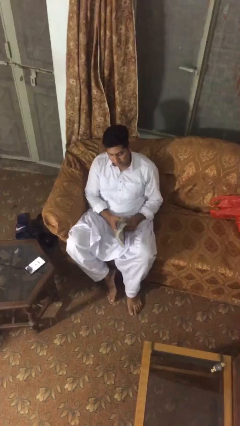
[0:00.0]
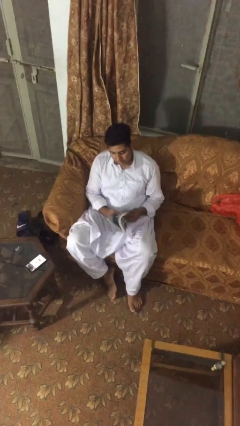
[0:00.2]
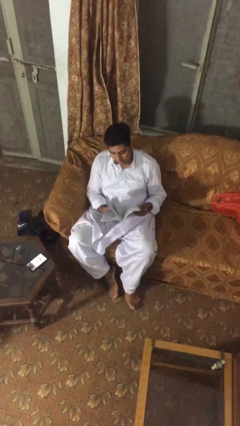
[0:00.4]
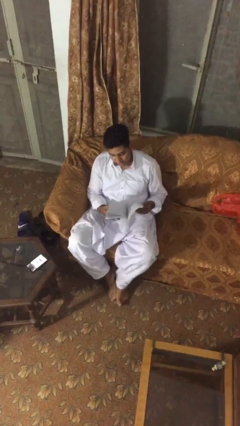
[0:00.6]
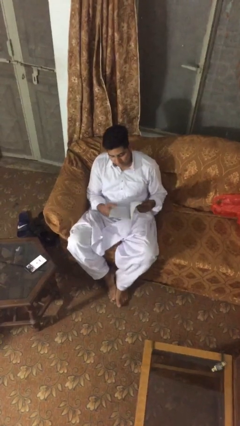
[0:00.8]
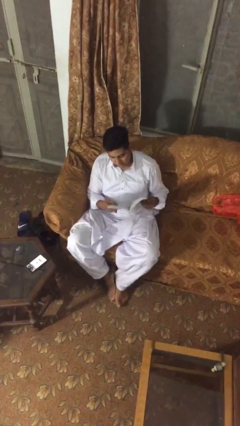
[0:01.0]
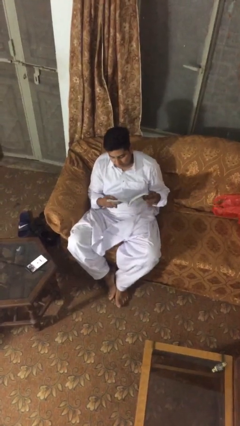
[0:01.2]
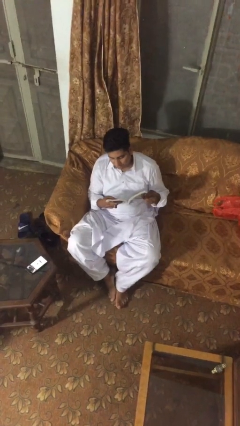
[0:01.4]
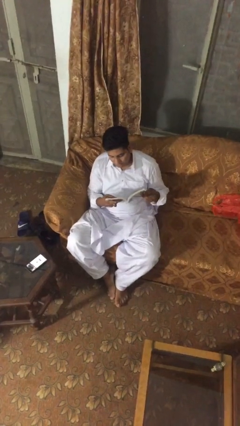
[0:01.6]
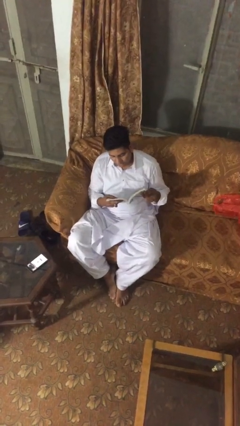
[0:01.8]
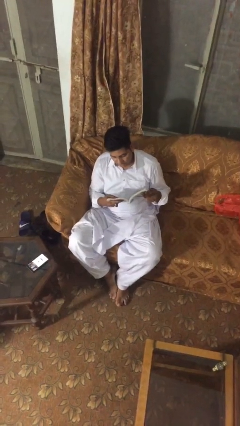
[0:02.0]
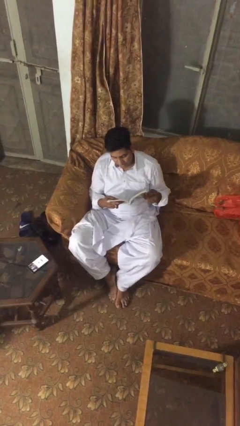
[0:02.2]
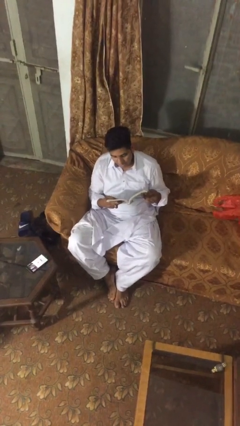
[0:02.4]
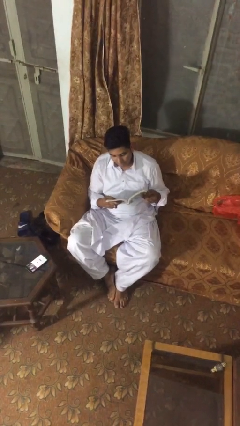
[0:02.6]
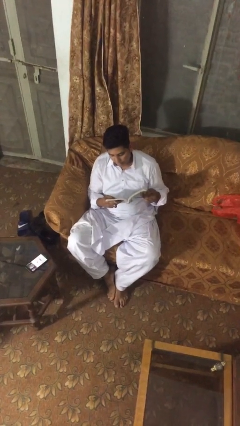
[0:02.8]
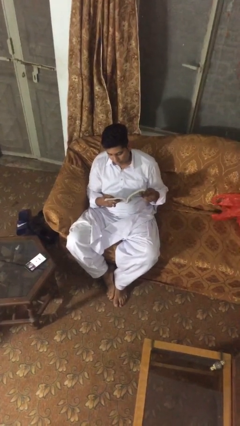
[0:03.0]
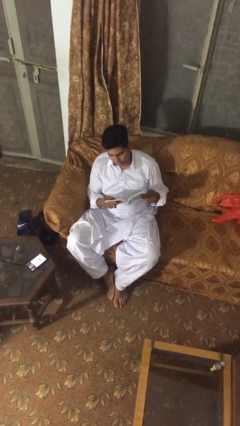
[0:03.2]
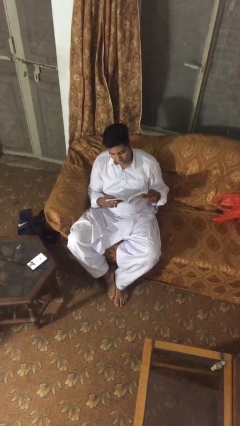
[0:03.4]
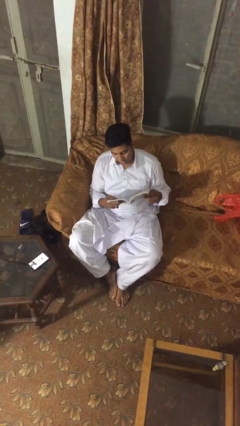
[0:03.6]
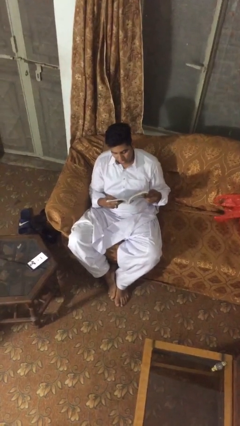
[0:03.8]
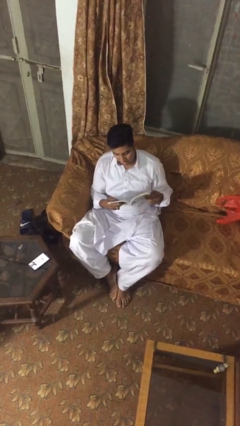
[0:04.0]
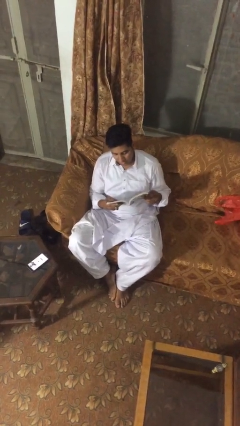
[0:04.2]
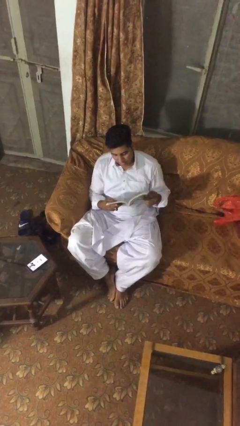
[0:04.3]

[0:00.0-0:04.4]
person reads document

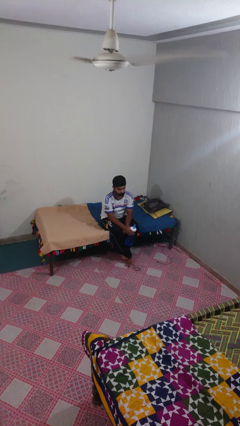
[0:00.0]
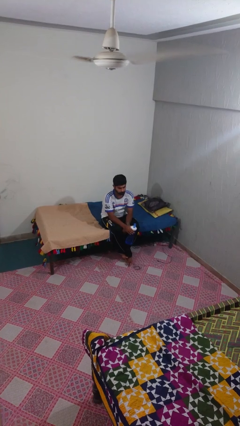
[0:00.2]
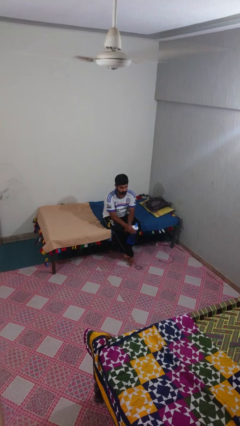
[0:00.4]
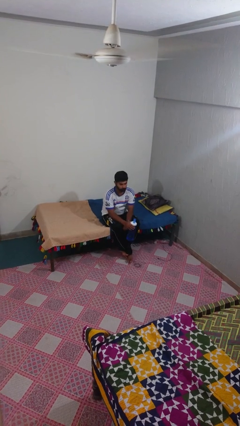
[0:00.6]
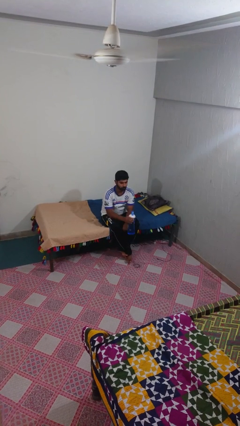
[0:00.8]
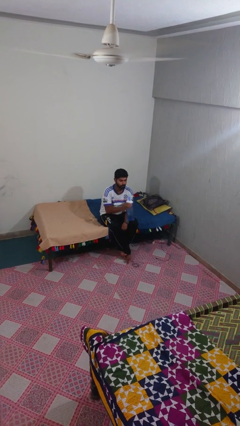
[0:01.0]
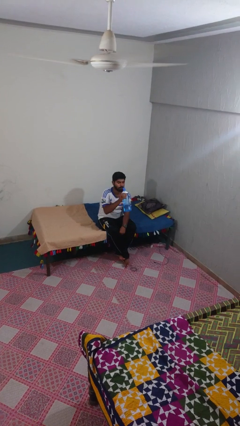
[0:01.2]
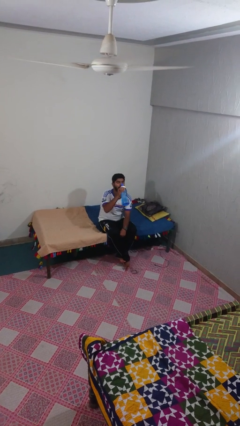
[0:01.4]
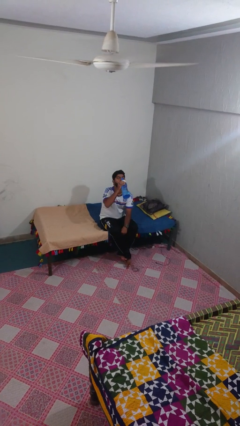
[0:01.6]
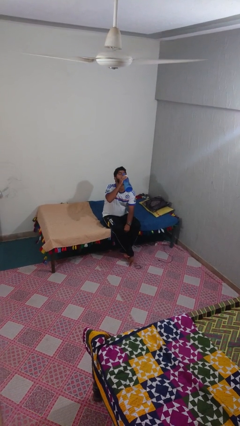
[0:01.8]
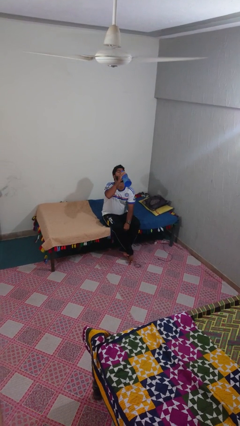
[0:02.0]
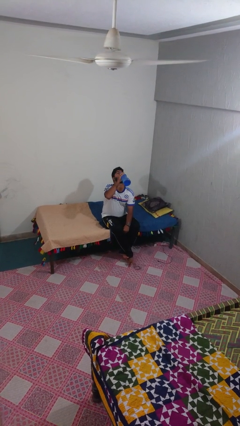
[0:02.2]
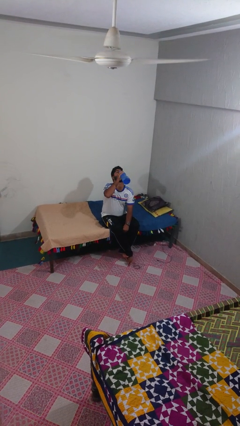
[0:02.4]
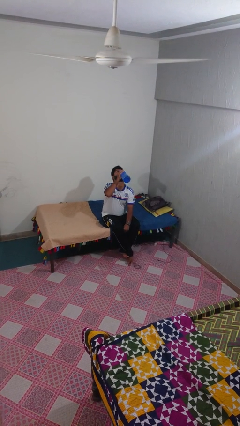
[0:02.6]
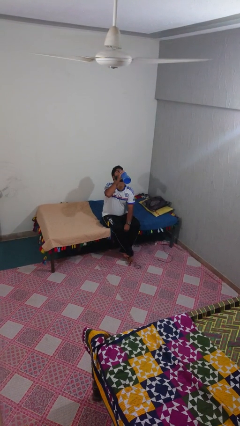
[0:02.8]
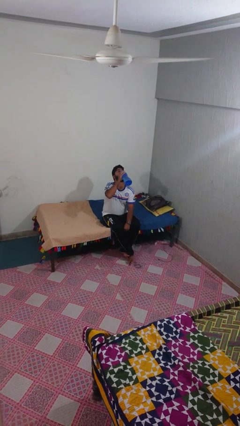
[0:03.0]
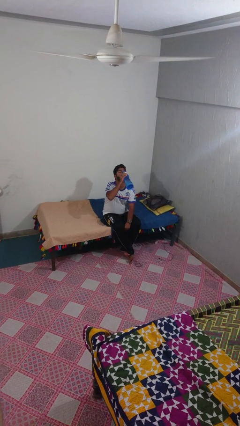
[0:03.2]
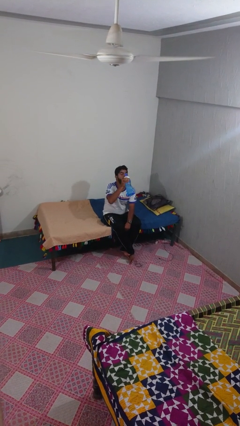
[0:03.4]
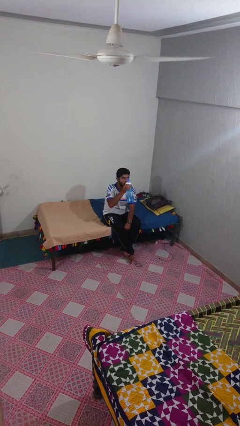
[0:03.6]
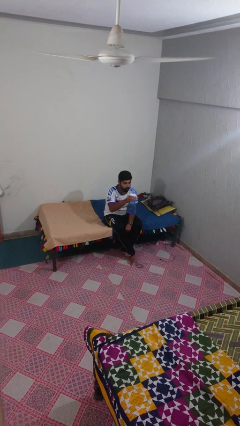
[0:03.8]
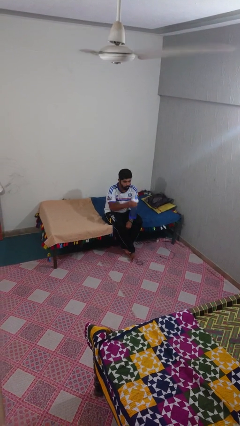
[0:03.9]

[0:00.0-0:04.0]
person drinks from bottle

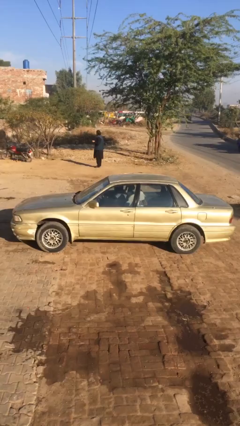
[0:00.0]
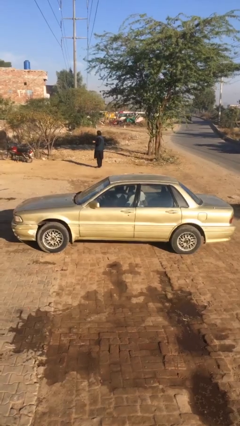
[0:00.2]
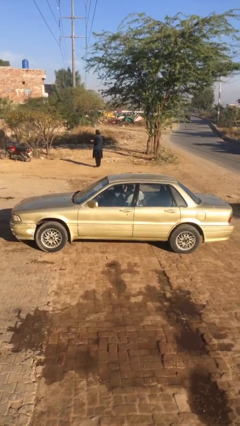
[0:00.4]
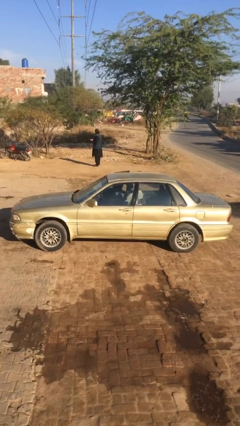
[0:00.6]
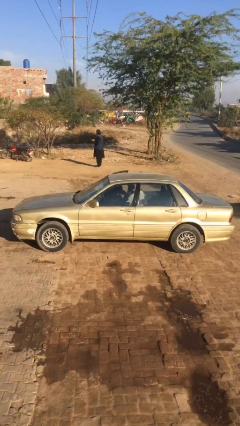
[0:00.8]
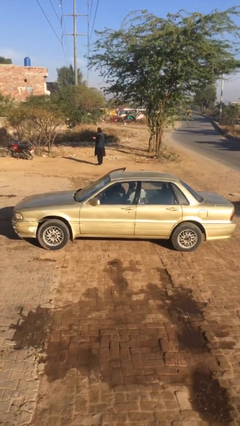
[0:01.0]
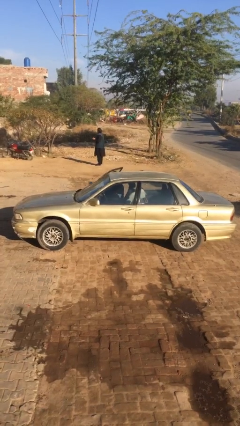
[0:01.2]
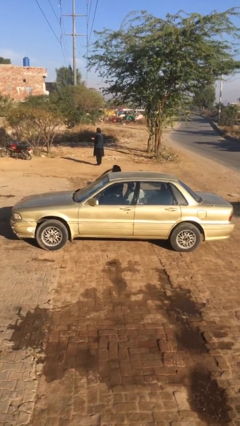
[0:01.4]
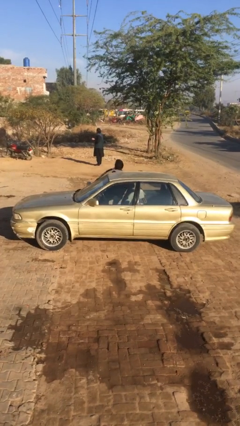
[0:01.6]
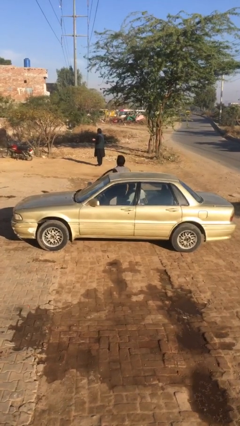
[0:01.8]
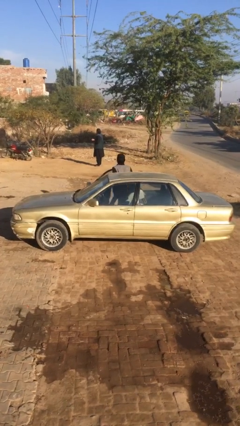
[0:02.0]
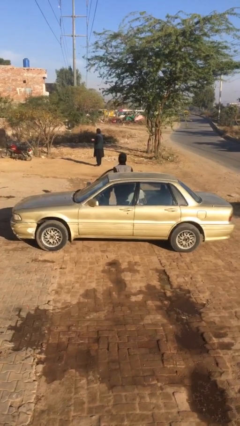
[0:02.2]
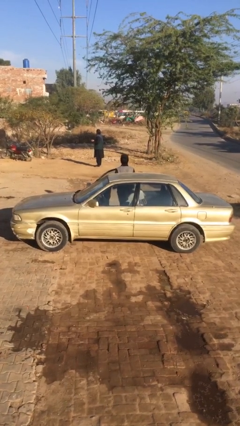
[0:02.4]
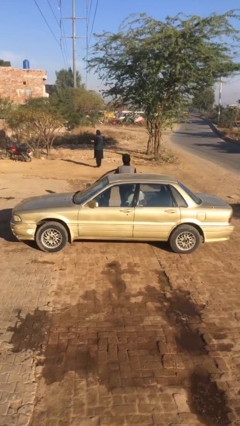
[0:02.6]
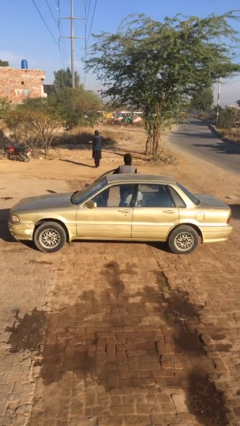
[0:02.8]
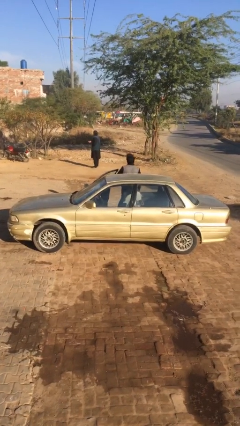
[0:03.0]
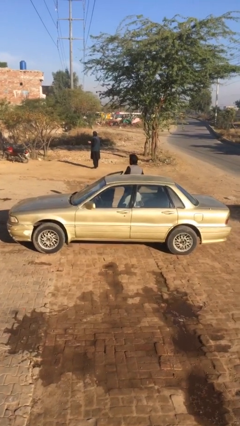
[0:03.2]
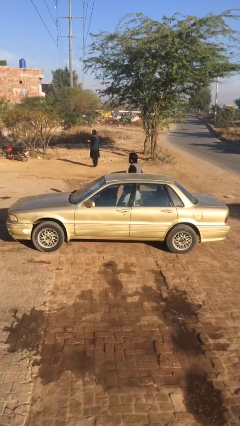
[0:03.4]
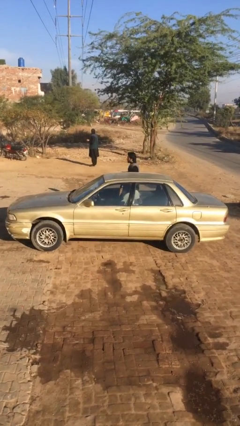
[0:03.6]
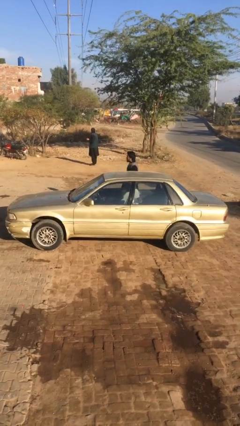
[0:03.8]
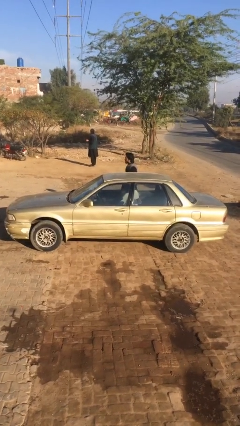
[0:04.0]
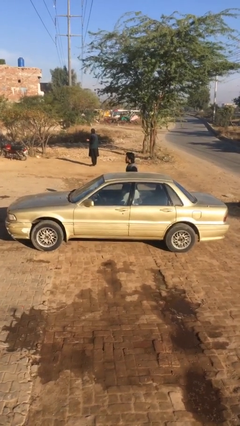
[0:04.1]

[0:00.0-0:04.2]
car drops off person

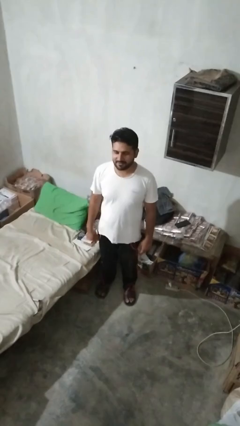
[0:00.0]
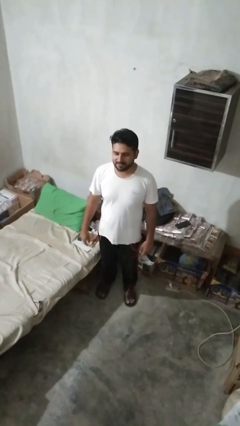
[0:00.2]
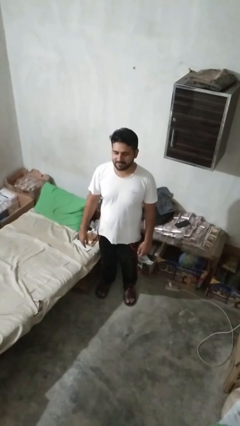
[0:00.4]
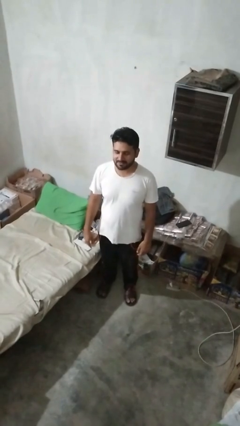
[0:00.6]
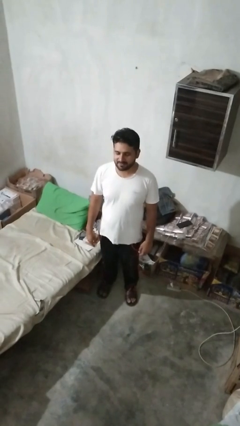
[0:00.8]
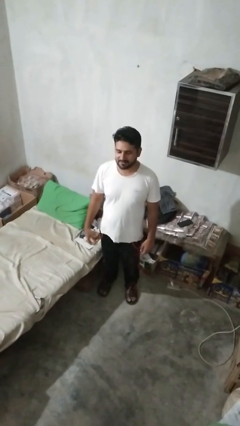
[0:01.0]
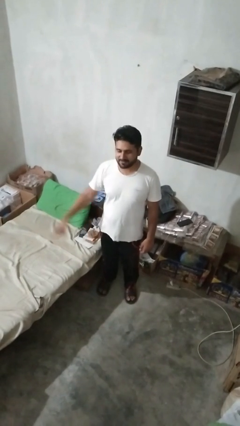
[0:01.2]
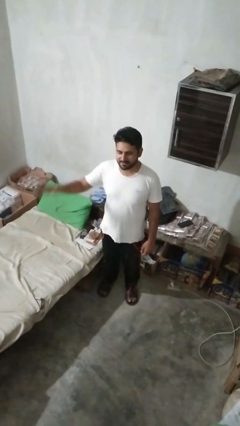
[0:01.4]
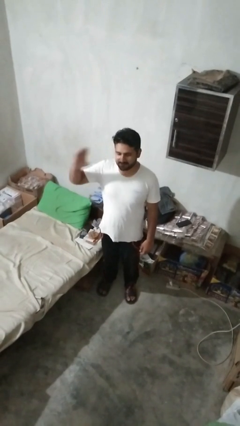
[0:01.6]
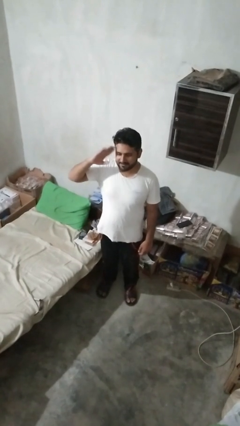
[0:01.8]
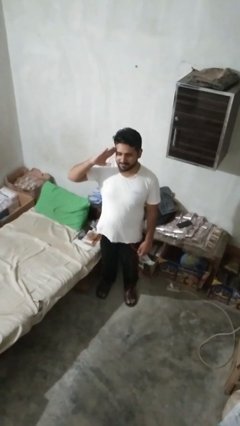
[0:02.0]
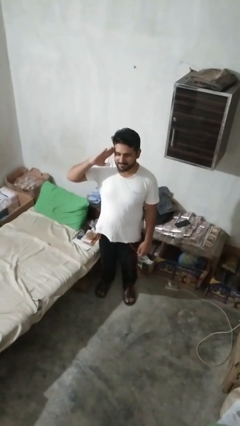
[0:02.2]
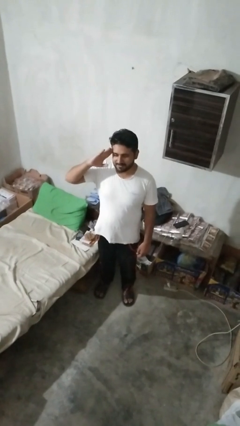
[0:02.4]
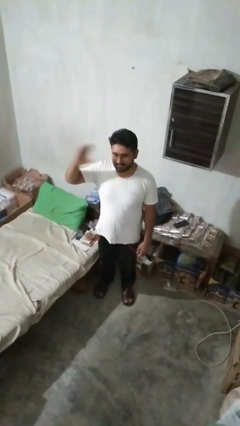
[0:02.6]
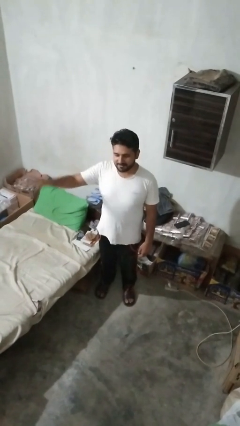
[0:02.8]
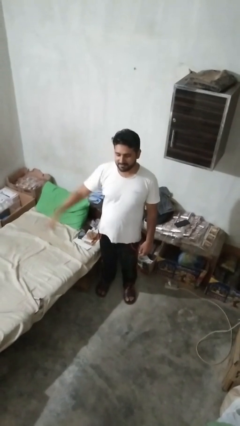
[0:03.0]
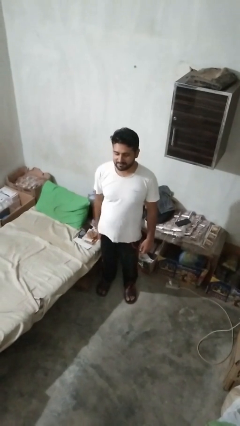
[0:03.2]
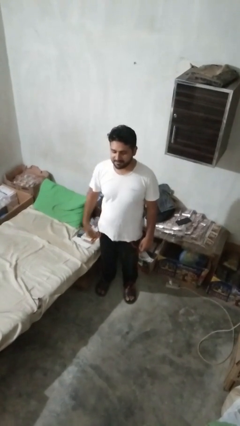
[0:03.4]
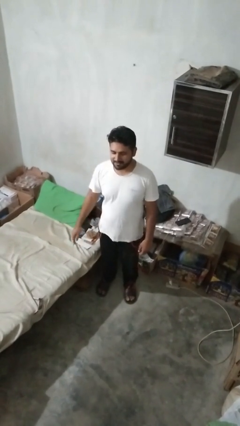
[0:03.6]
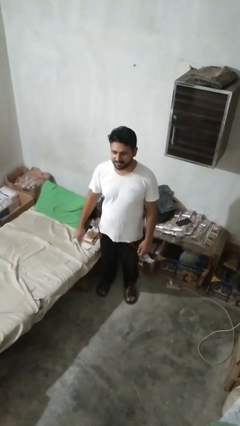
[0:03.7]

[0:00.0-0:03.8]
person salutes

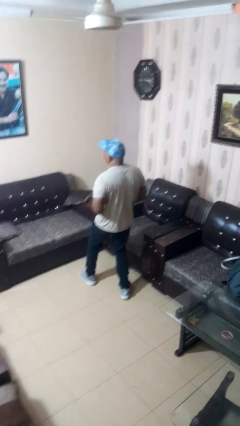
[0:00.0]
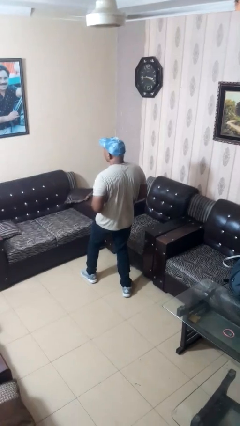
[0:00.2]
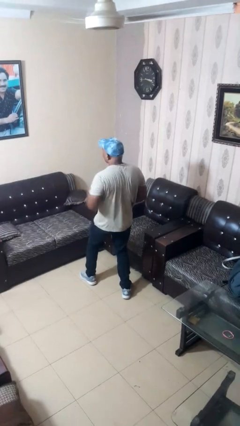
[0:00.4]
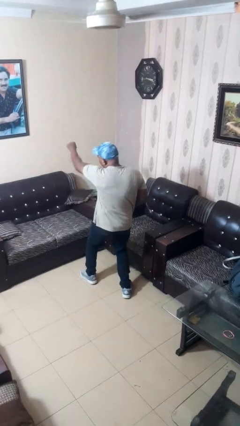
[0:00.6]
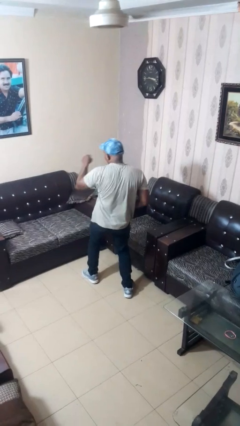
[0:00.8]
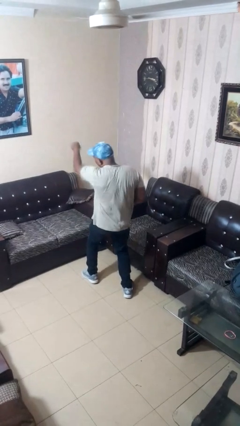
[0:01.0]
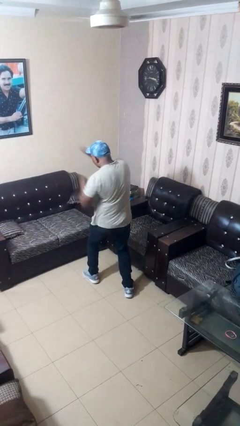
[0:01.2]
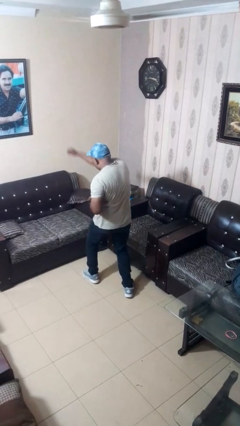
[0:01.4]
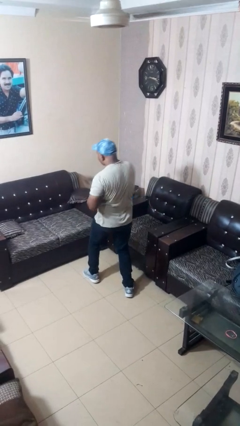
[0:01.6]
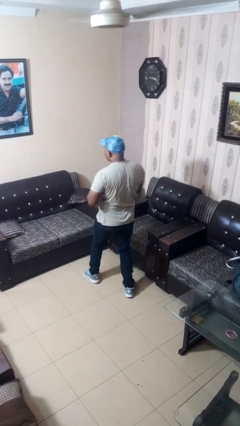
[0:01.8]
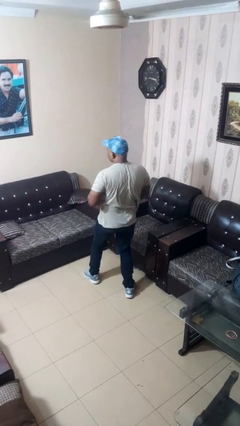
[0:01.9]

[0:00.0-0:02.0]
person punches
